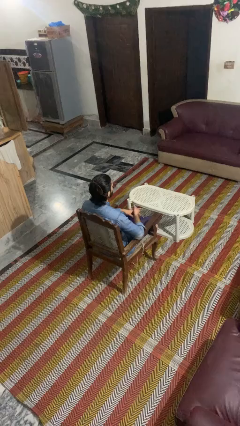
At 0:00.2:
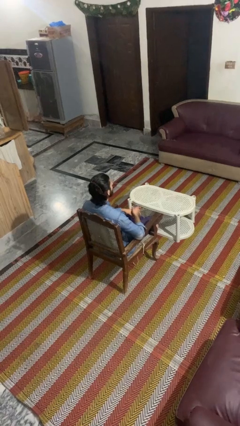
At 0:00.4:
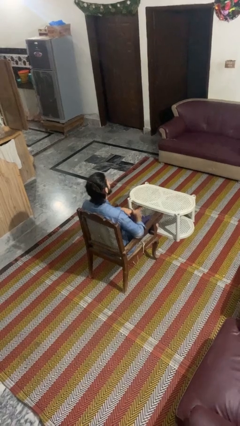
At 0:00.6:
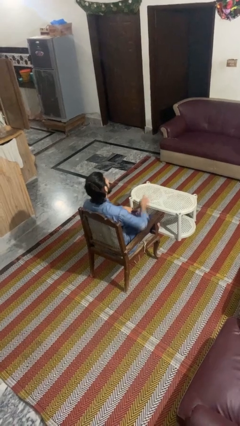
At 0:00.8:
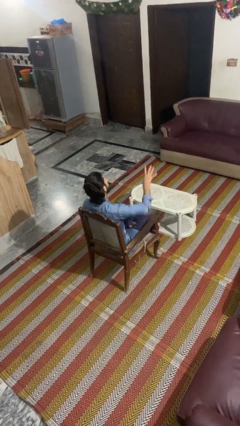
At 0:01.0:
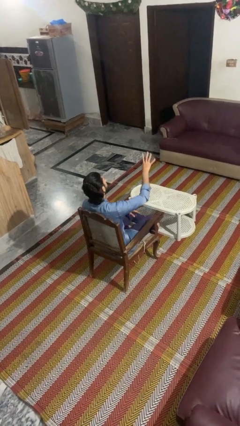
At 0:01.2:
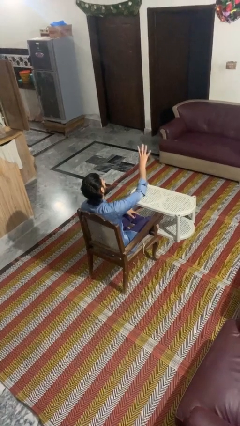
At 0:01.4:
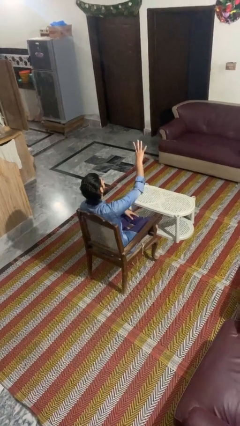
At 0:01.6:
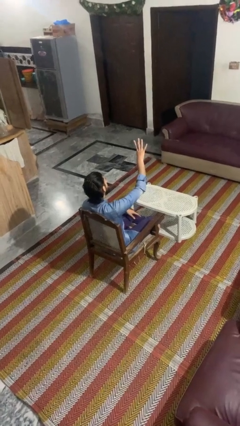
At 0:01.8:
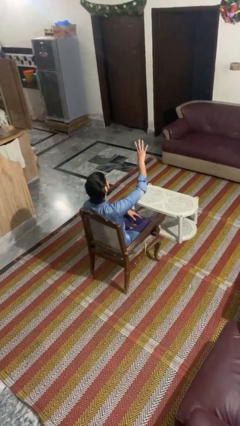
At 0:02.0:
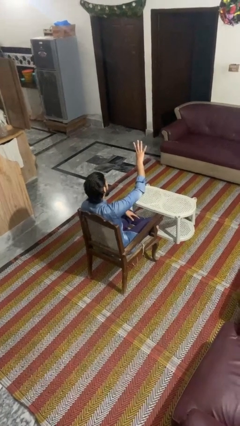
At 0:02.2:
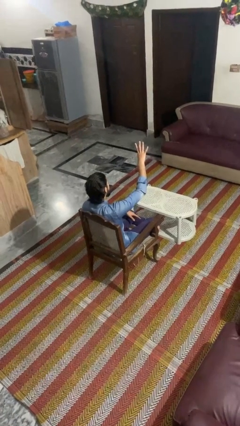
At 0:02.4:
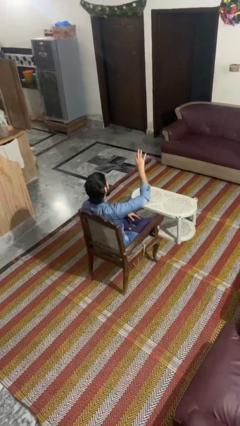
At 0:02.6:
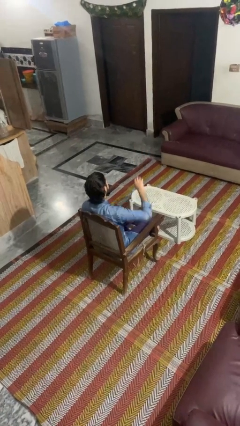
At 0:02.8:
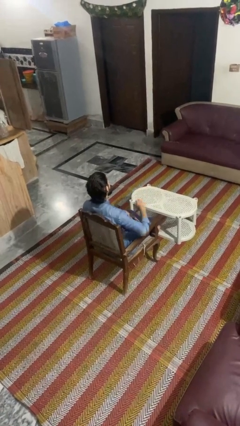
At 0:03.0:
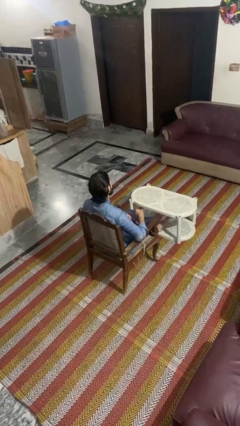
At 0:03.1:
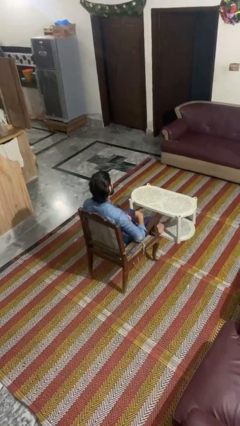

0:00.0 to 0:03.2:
person gestures number four

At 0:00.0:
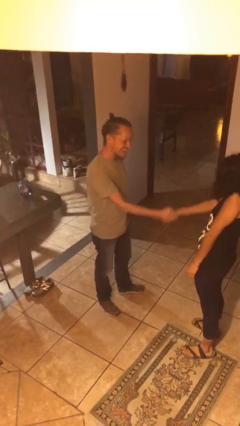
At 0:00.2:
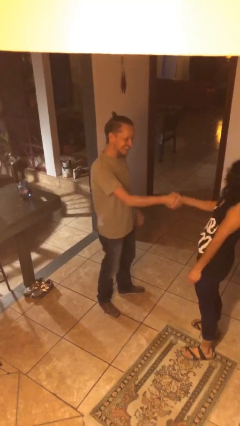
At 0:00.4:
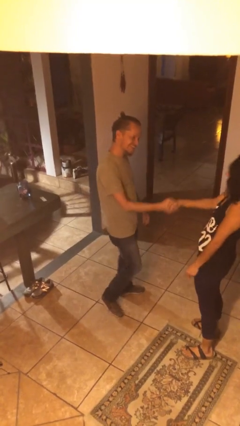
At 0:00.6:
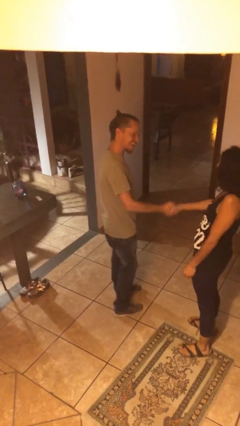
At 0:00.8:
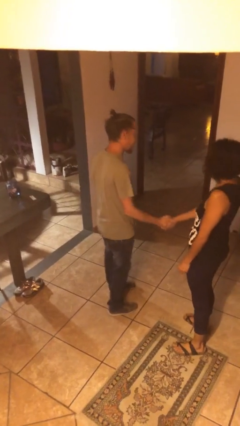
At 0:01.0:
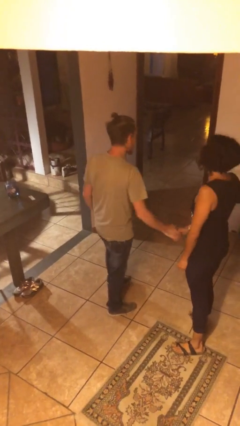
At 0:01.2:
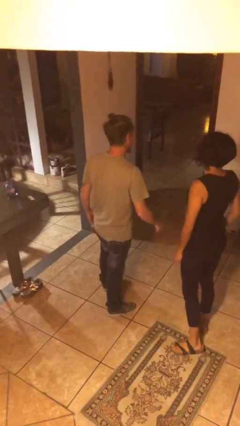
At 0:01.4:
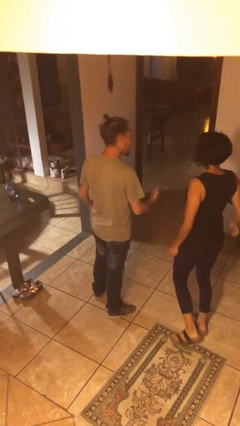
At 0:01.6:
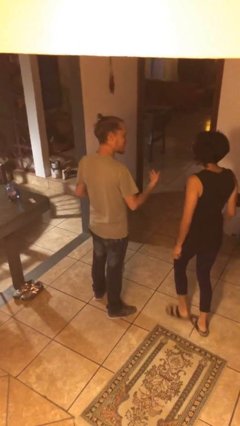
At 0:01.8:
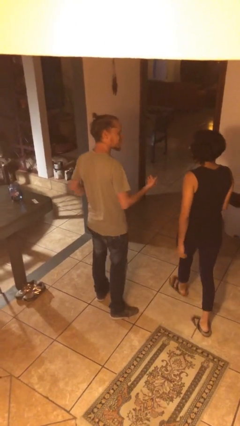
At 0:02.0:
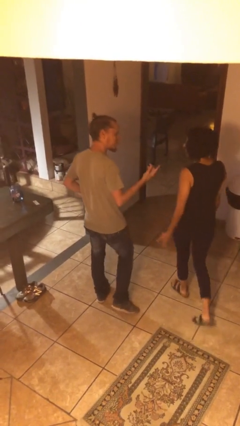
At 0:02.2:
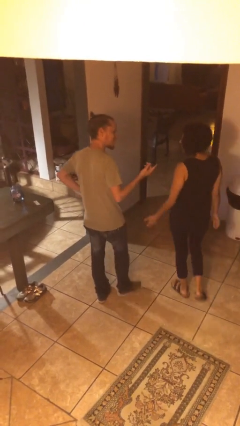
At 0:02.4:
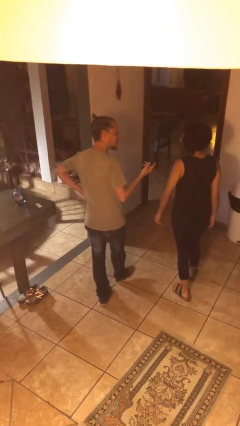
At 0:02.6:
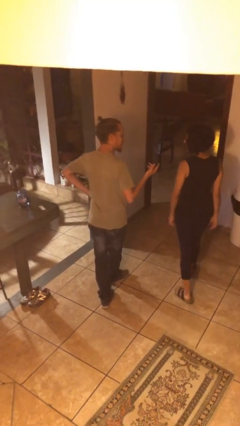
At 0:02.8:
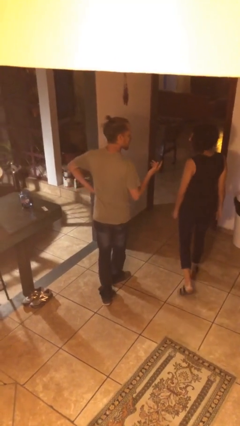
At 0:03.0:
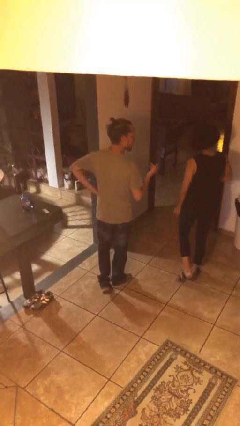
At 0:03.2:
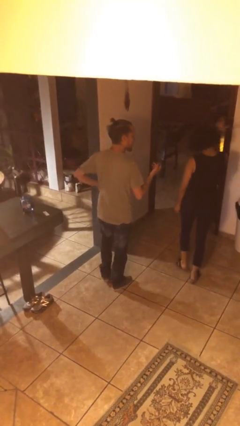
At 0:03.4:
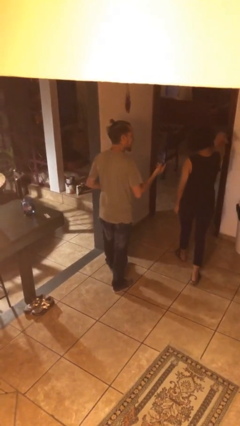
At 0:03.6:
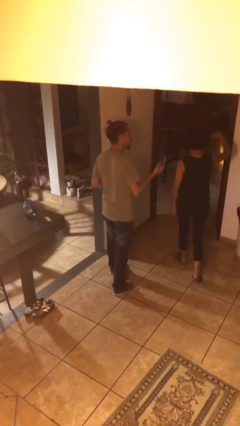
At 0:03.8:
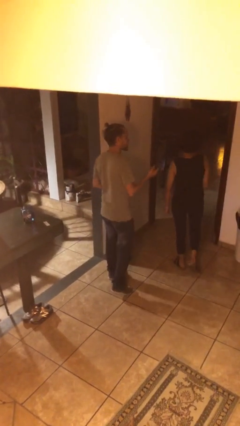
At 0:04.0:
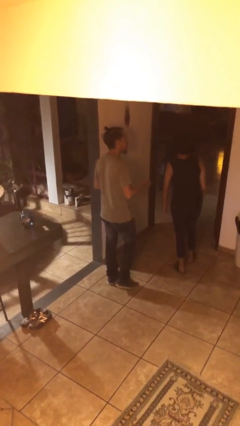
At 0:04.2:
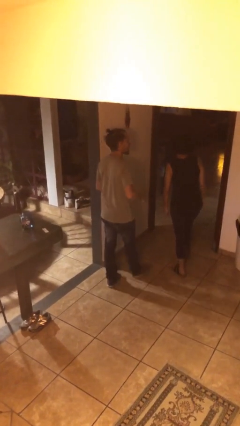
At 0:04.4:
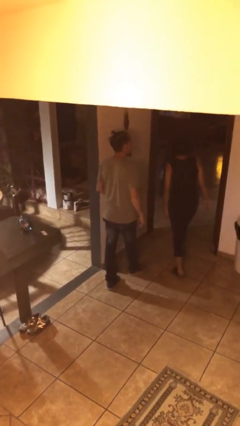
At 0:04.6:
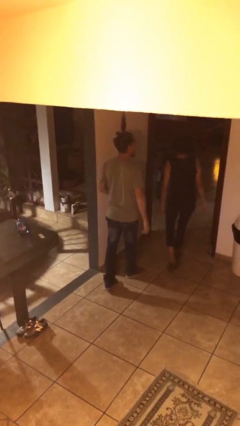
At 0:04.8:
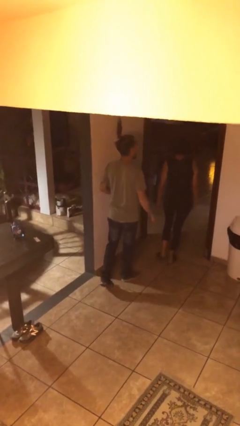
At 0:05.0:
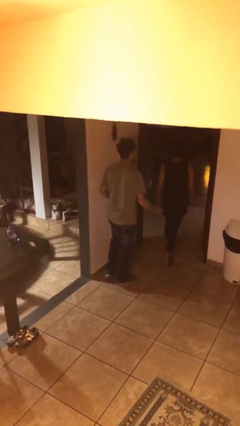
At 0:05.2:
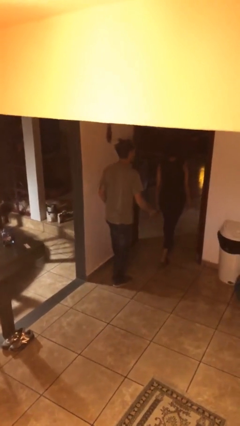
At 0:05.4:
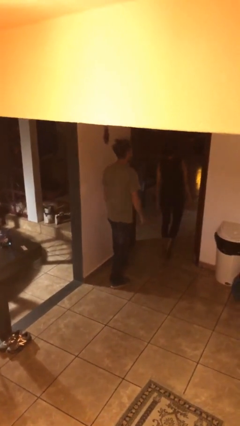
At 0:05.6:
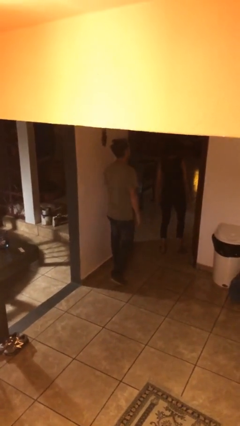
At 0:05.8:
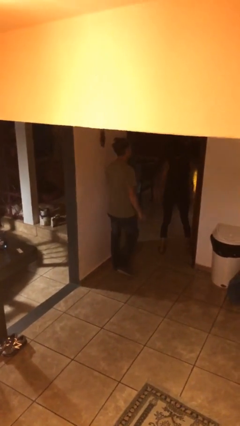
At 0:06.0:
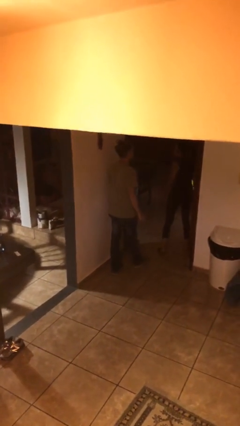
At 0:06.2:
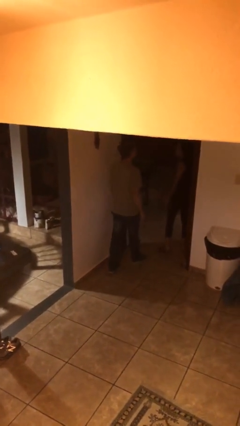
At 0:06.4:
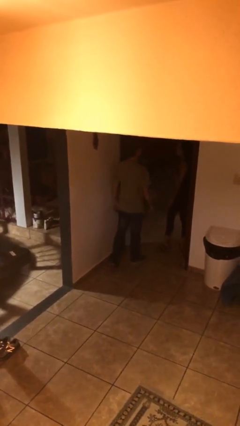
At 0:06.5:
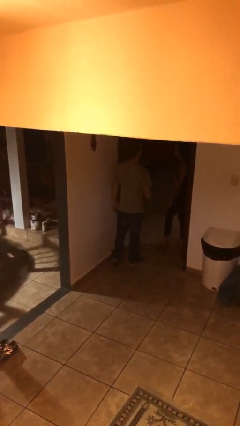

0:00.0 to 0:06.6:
person talks to person

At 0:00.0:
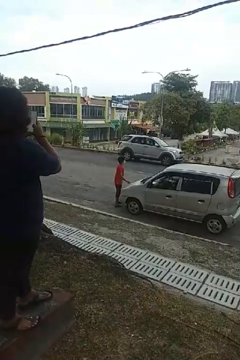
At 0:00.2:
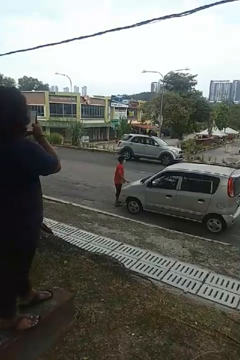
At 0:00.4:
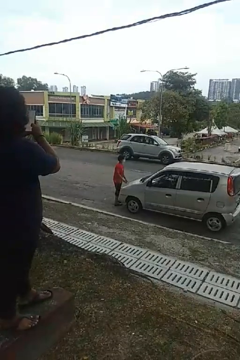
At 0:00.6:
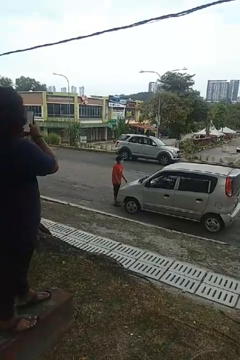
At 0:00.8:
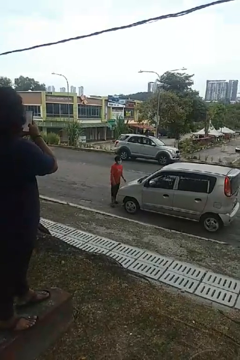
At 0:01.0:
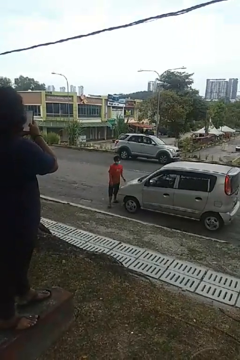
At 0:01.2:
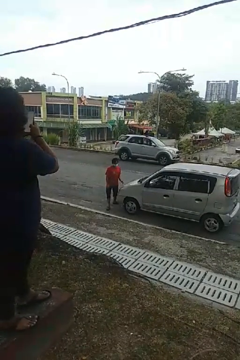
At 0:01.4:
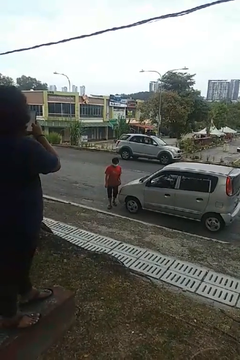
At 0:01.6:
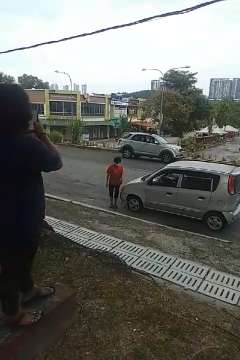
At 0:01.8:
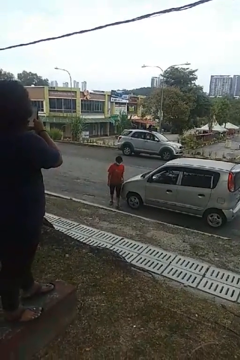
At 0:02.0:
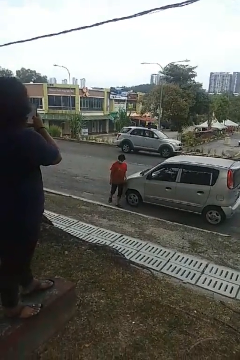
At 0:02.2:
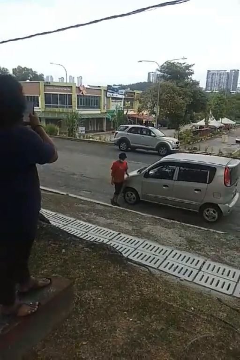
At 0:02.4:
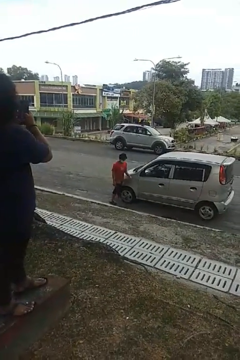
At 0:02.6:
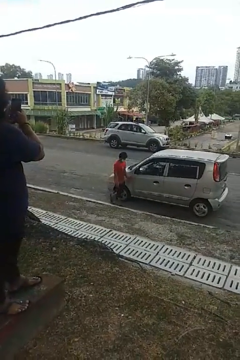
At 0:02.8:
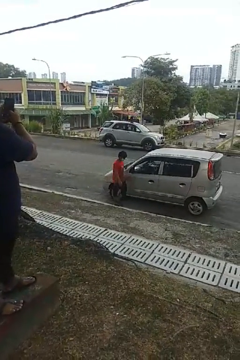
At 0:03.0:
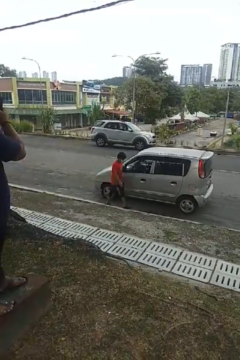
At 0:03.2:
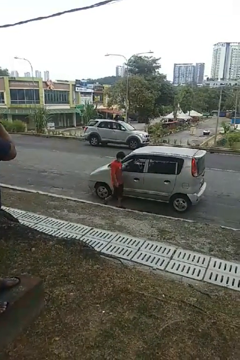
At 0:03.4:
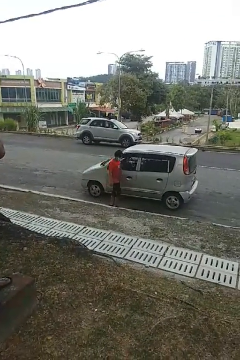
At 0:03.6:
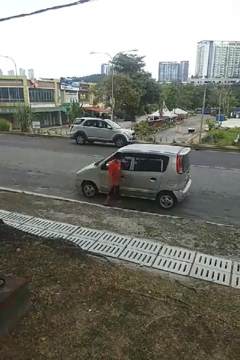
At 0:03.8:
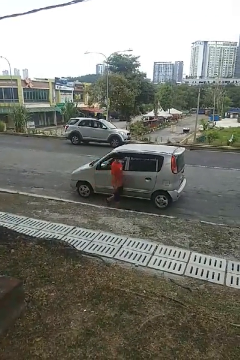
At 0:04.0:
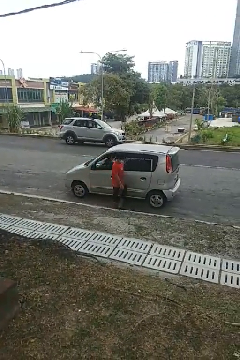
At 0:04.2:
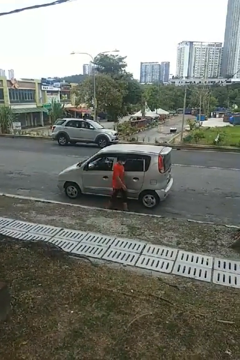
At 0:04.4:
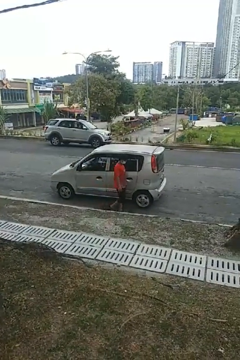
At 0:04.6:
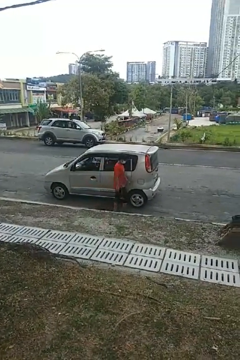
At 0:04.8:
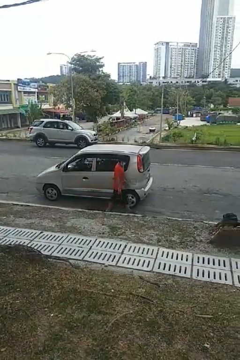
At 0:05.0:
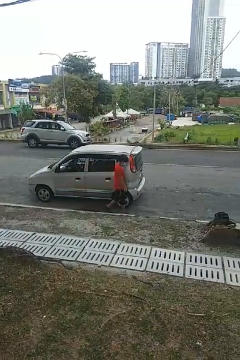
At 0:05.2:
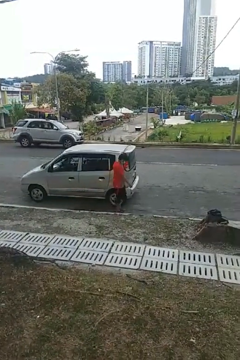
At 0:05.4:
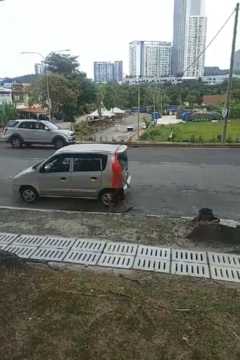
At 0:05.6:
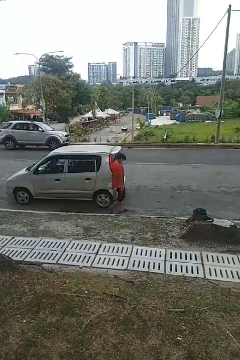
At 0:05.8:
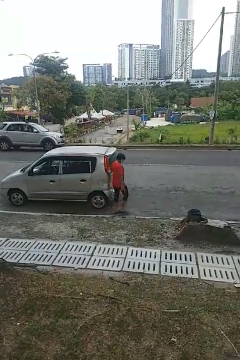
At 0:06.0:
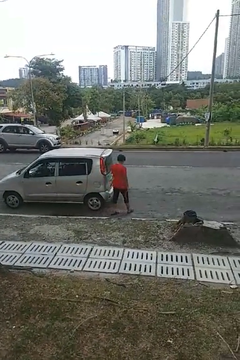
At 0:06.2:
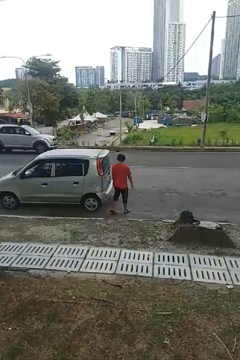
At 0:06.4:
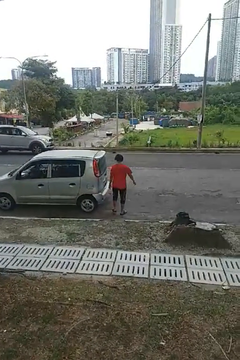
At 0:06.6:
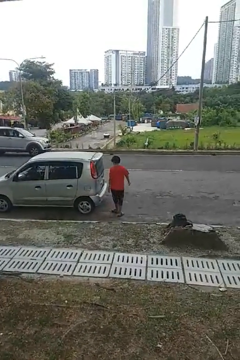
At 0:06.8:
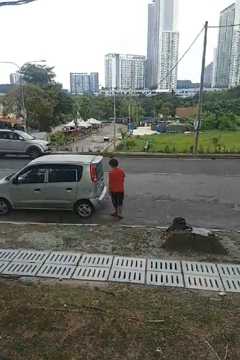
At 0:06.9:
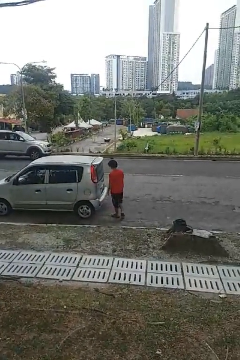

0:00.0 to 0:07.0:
person walks around car

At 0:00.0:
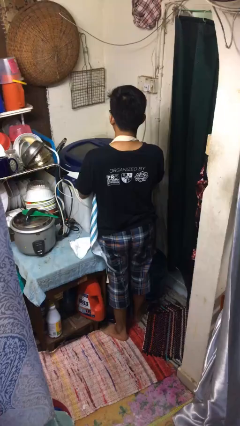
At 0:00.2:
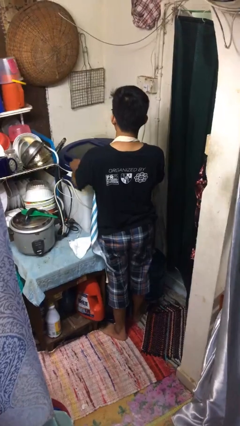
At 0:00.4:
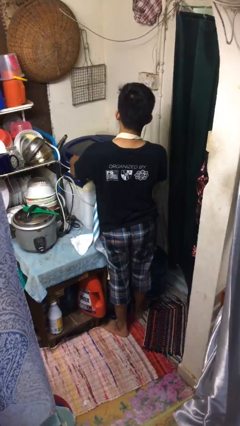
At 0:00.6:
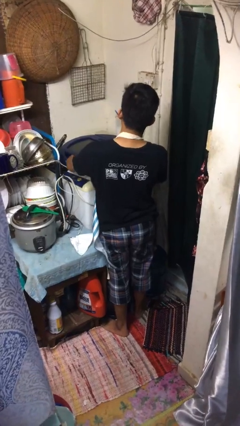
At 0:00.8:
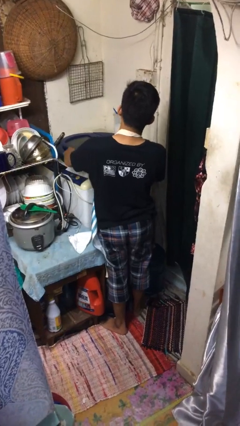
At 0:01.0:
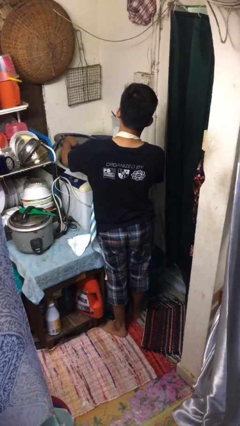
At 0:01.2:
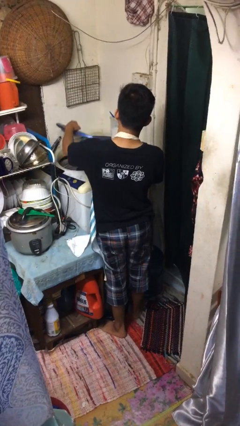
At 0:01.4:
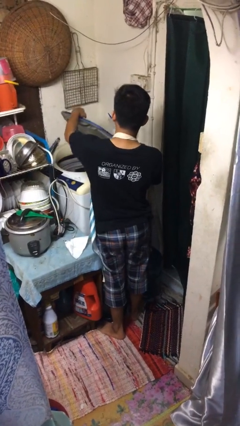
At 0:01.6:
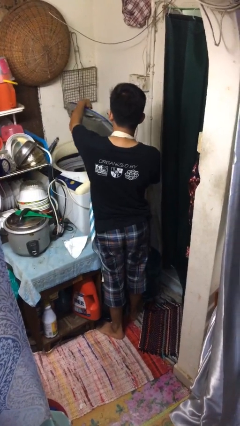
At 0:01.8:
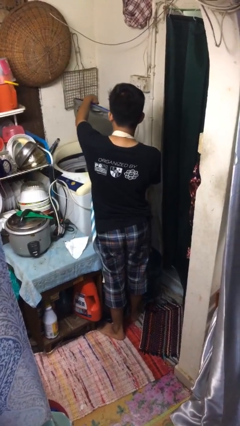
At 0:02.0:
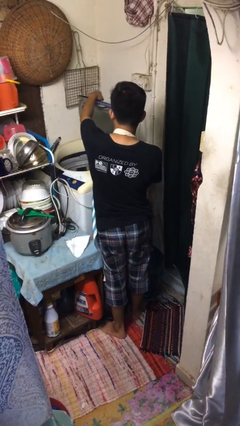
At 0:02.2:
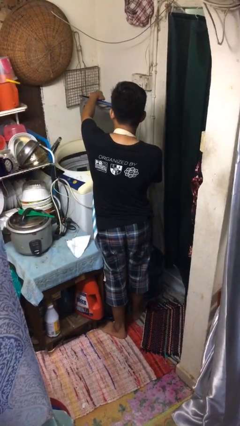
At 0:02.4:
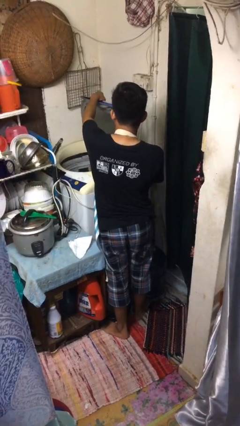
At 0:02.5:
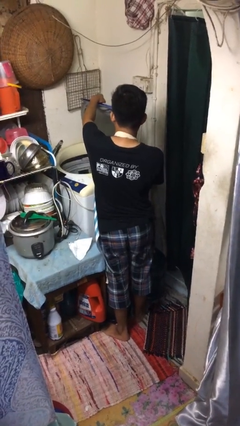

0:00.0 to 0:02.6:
person opens clothes washer
